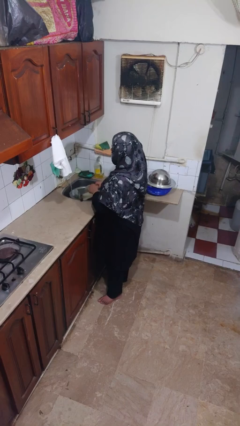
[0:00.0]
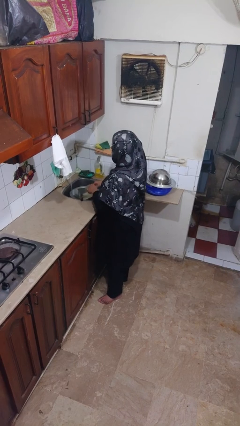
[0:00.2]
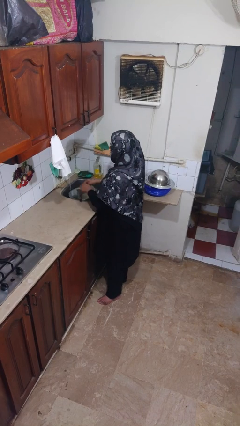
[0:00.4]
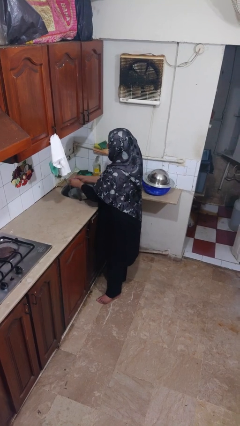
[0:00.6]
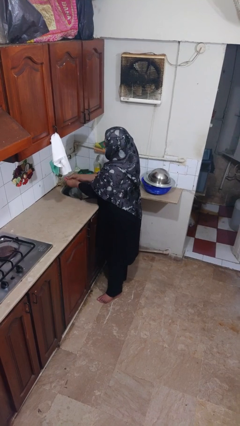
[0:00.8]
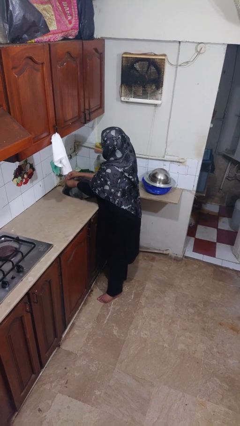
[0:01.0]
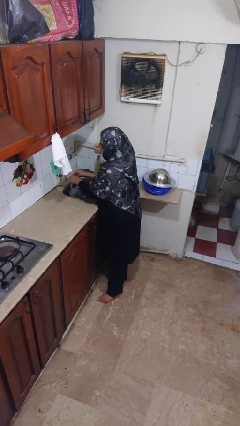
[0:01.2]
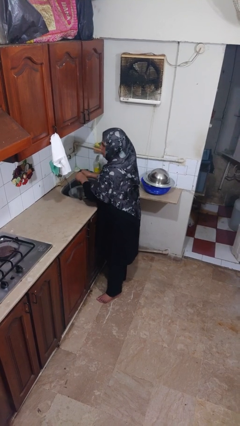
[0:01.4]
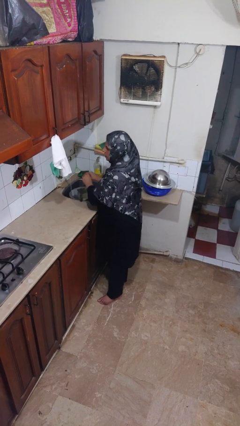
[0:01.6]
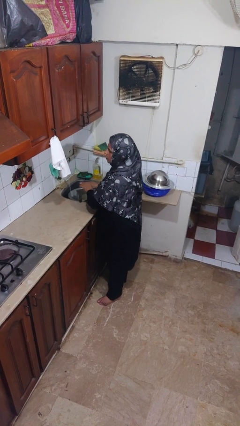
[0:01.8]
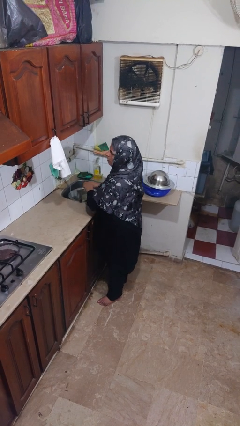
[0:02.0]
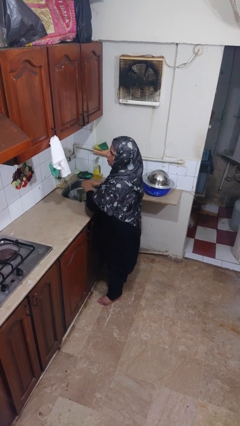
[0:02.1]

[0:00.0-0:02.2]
person washes hands

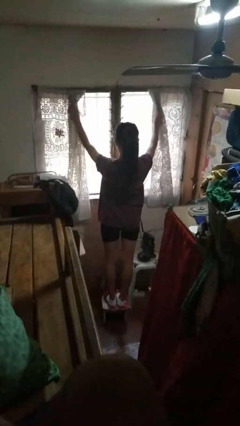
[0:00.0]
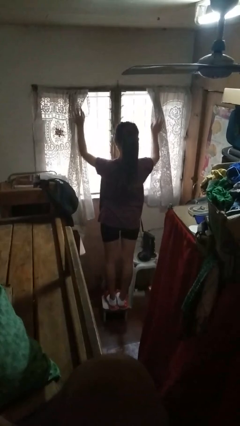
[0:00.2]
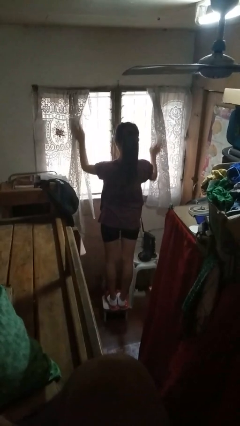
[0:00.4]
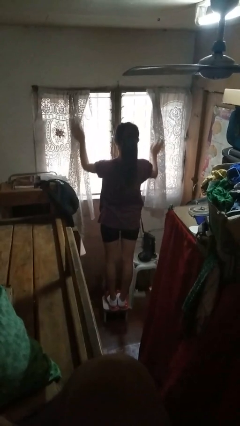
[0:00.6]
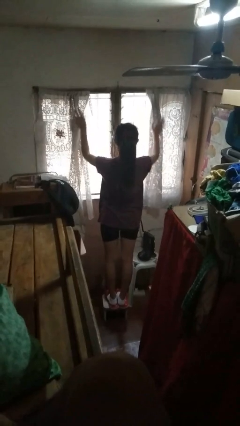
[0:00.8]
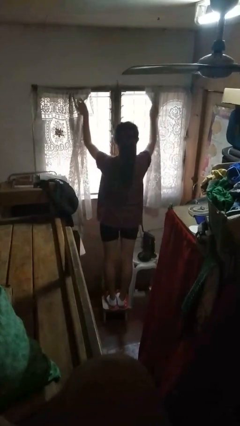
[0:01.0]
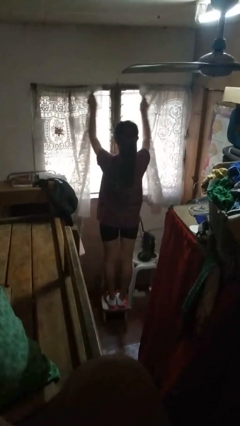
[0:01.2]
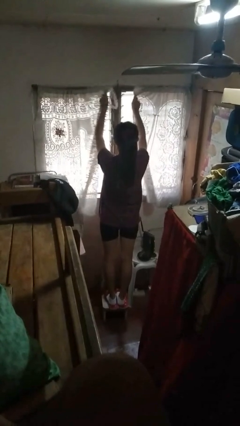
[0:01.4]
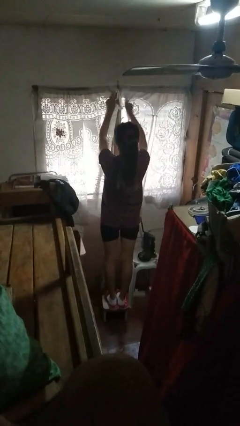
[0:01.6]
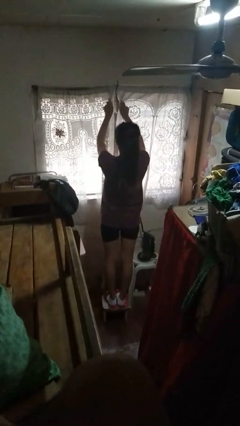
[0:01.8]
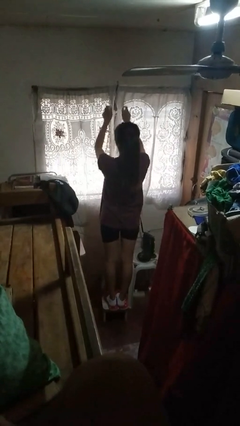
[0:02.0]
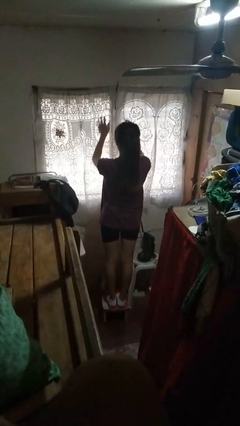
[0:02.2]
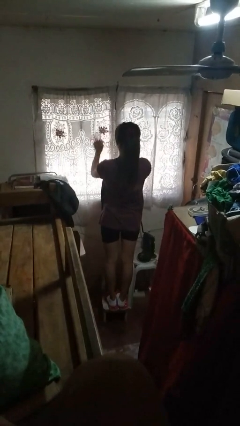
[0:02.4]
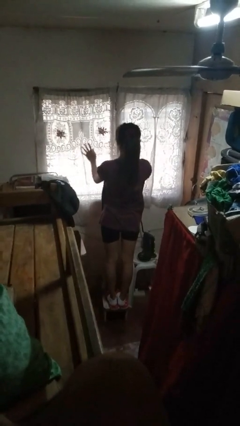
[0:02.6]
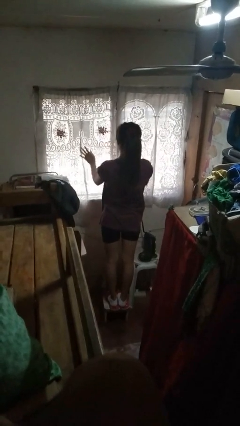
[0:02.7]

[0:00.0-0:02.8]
person closes curtains

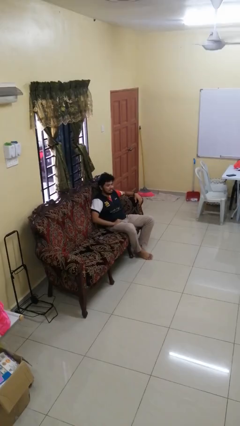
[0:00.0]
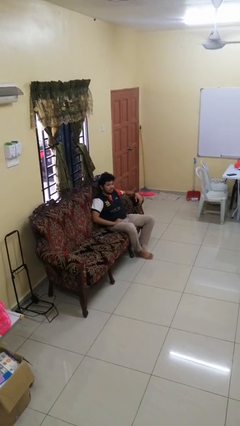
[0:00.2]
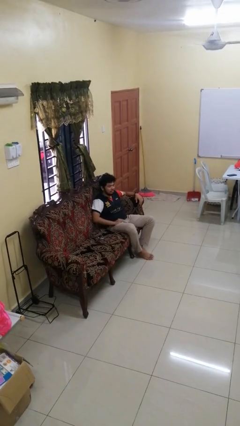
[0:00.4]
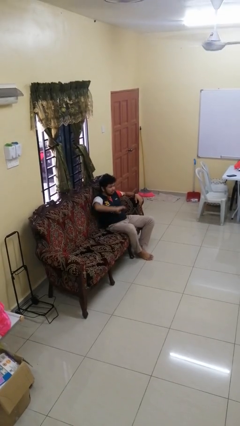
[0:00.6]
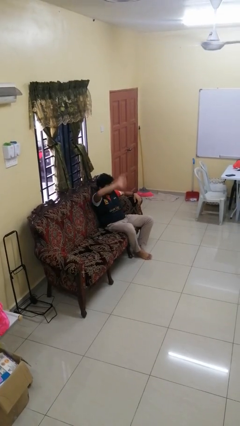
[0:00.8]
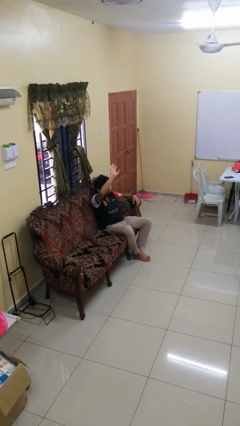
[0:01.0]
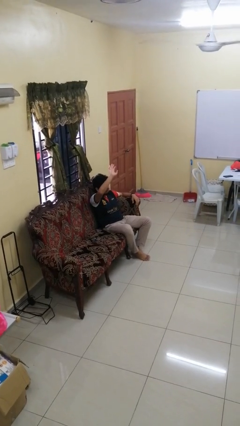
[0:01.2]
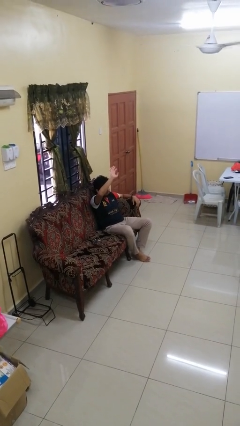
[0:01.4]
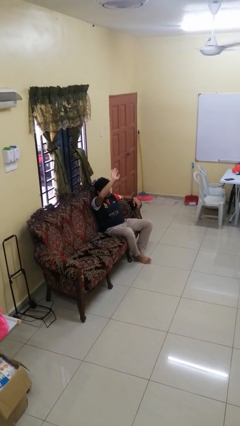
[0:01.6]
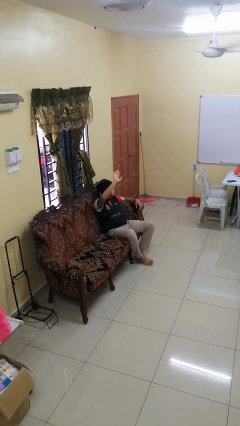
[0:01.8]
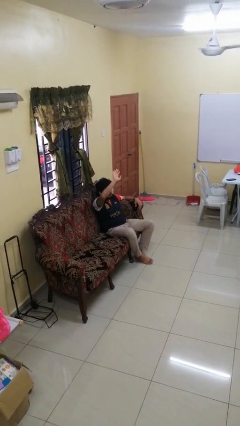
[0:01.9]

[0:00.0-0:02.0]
person gestures swipe up

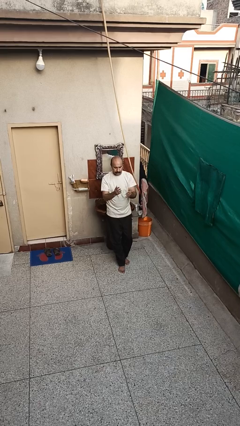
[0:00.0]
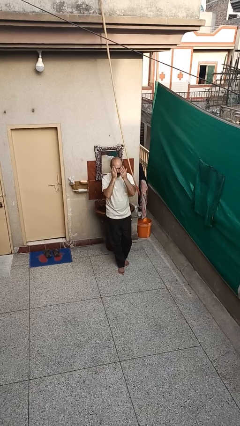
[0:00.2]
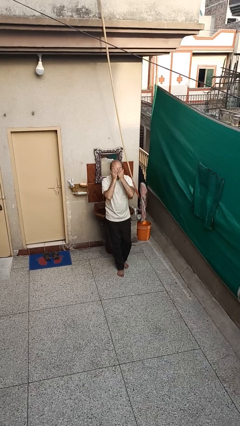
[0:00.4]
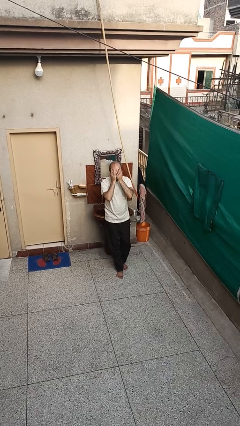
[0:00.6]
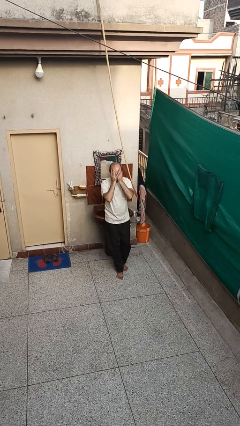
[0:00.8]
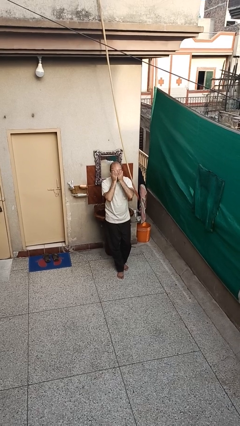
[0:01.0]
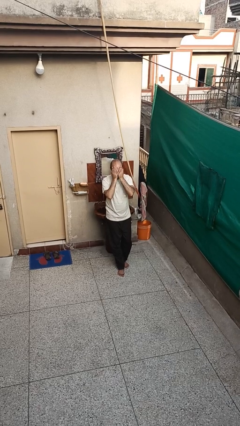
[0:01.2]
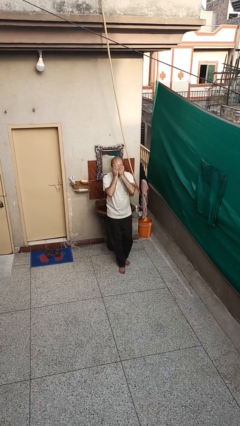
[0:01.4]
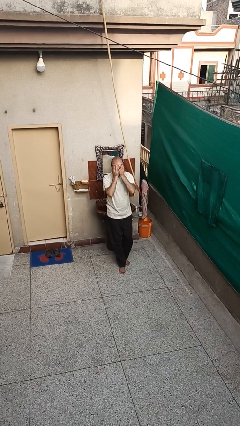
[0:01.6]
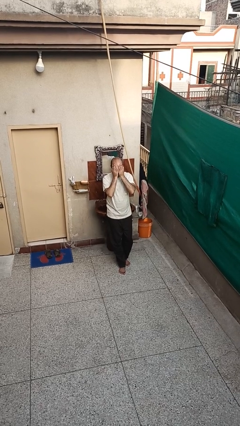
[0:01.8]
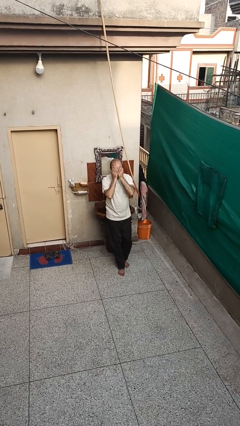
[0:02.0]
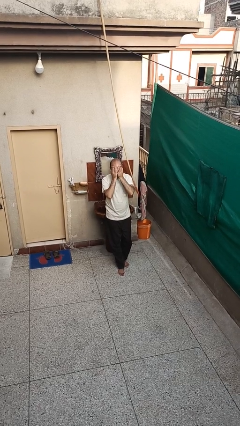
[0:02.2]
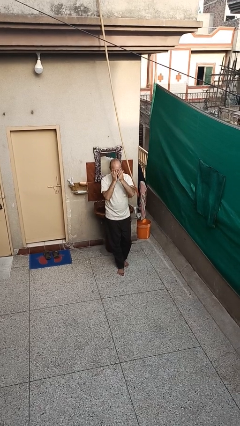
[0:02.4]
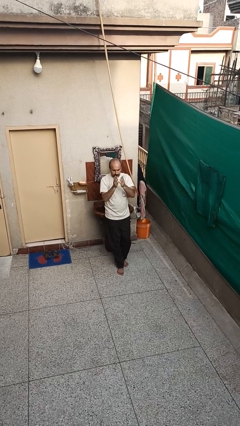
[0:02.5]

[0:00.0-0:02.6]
person covers face with hands

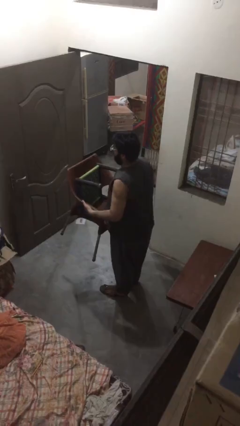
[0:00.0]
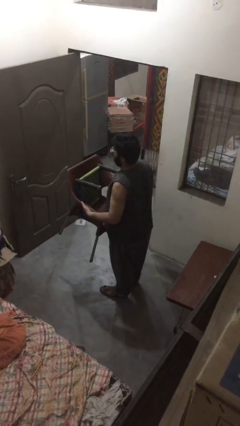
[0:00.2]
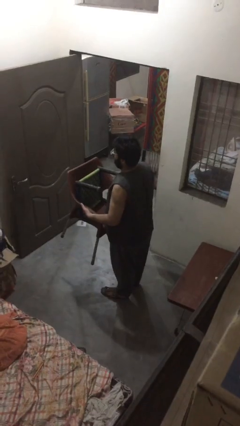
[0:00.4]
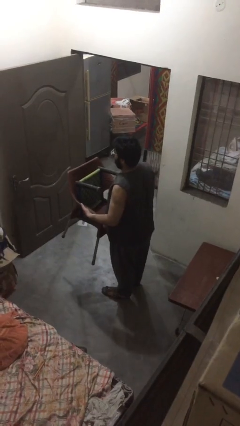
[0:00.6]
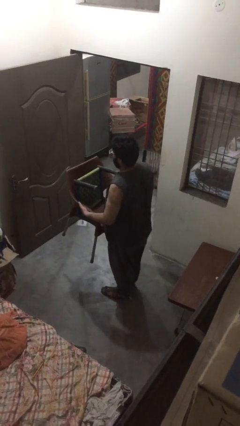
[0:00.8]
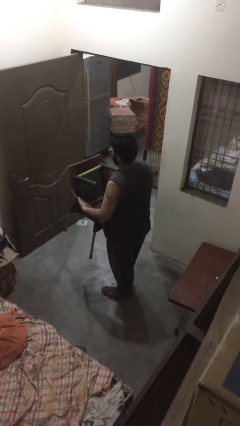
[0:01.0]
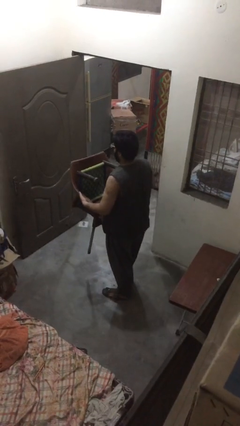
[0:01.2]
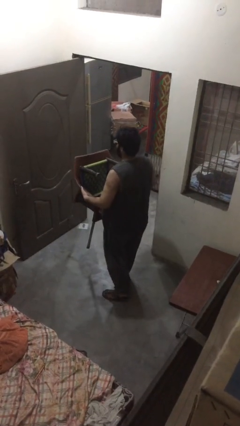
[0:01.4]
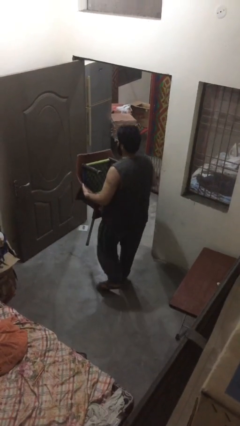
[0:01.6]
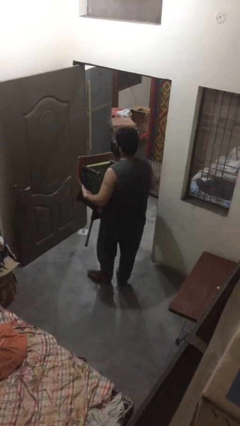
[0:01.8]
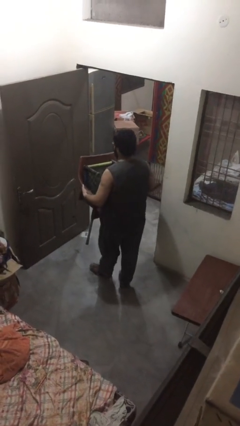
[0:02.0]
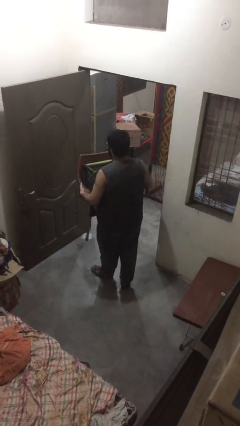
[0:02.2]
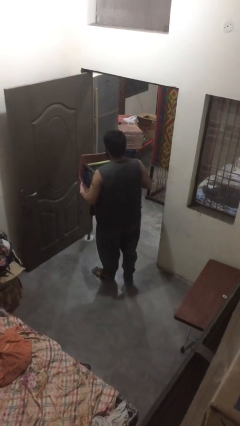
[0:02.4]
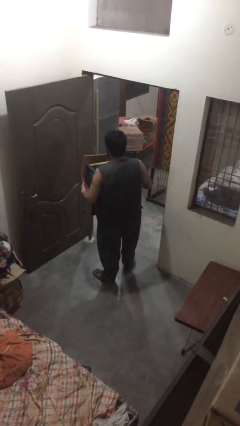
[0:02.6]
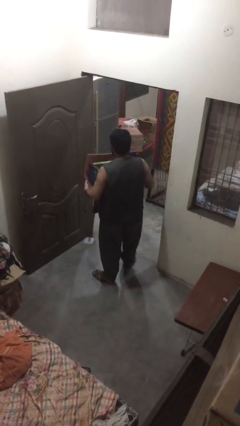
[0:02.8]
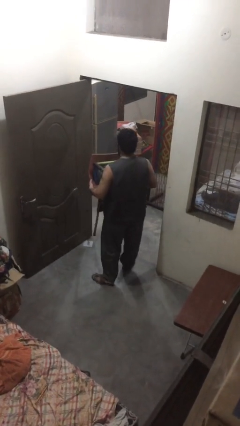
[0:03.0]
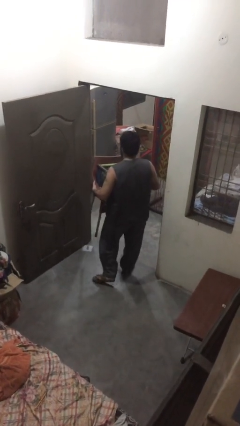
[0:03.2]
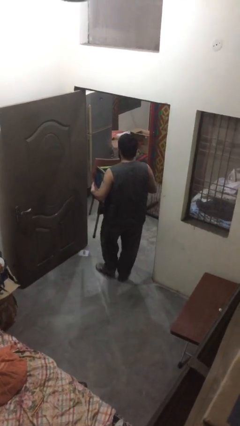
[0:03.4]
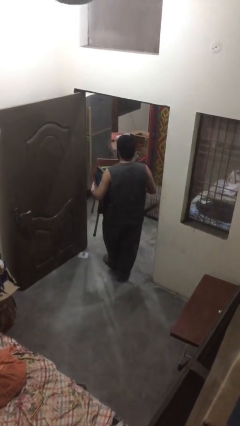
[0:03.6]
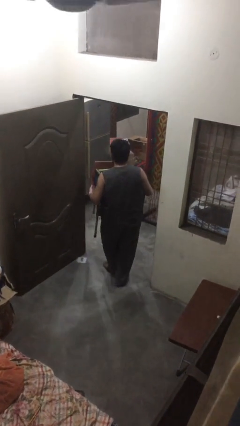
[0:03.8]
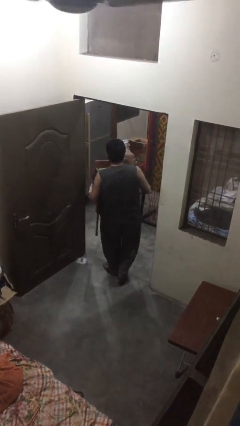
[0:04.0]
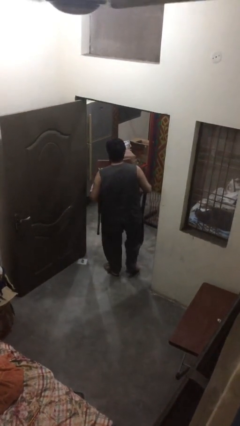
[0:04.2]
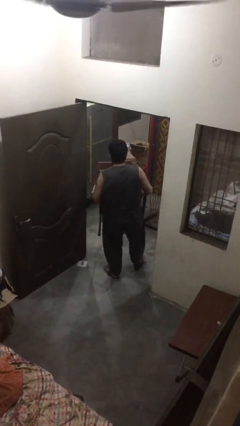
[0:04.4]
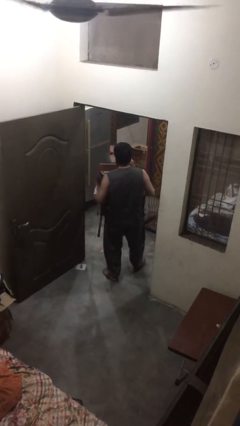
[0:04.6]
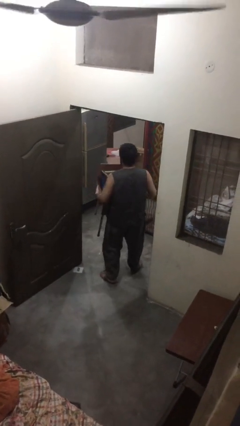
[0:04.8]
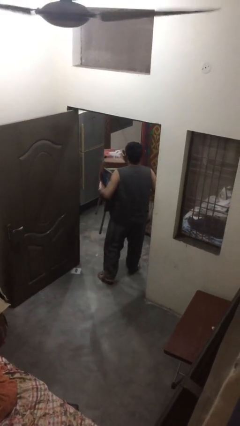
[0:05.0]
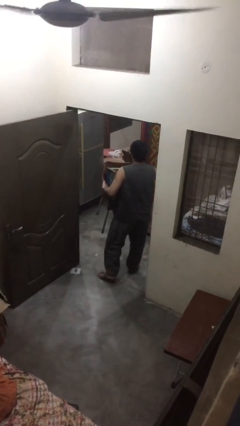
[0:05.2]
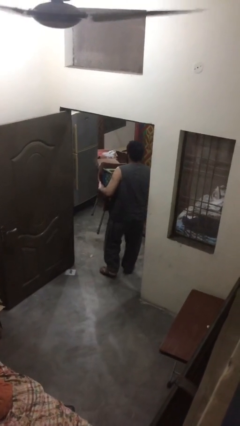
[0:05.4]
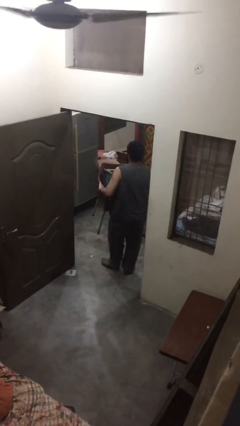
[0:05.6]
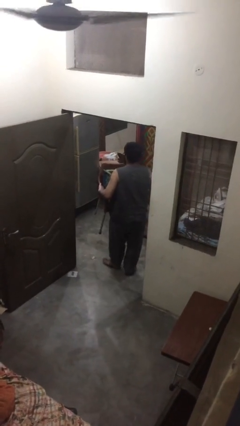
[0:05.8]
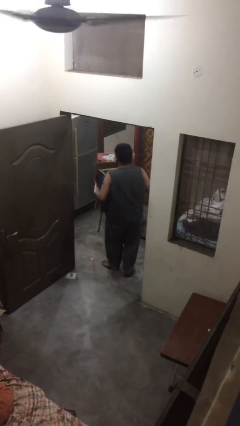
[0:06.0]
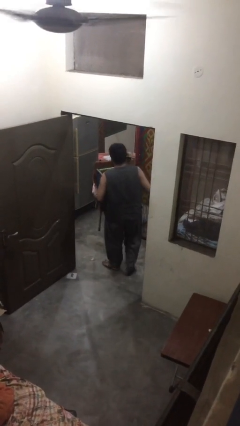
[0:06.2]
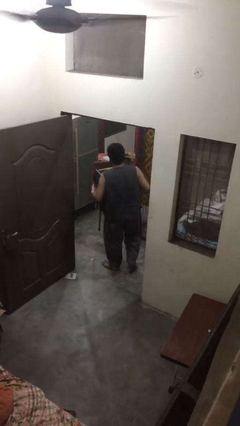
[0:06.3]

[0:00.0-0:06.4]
person carries heavy object

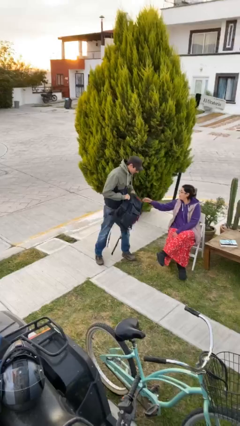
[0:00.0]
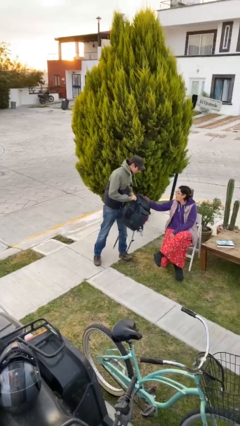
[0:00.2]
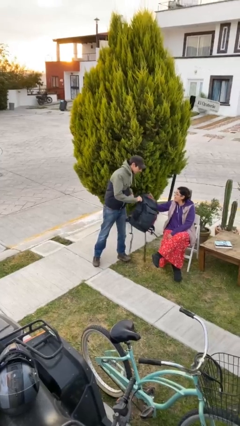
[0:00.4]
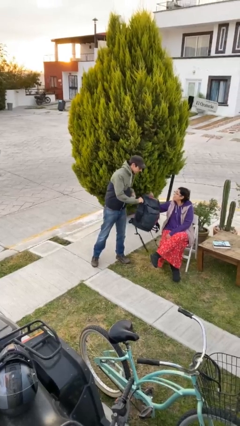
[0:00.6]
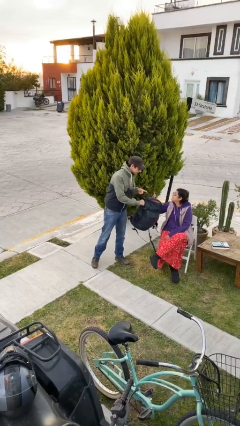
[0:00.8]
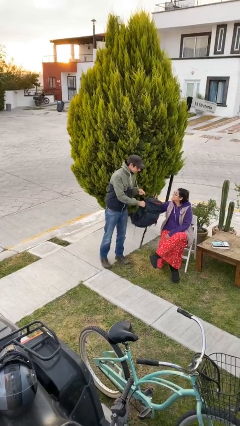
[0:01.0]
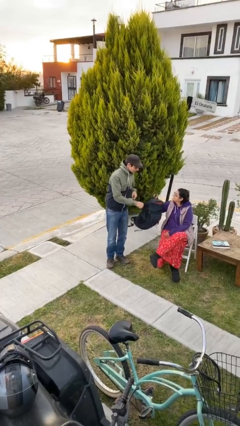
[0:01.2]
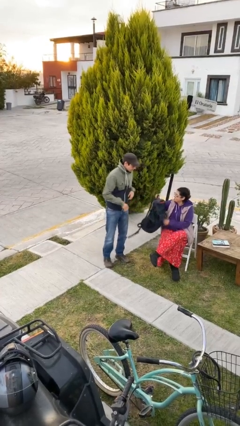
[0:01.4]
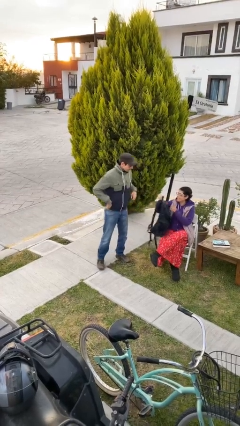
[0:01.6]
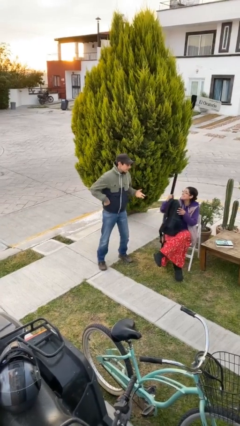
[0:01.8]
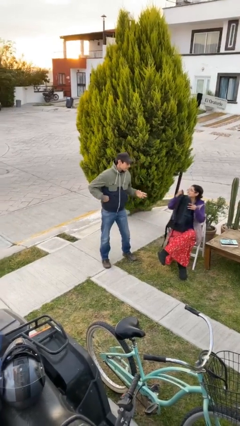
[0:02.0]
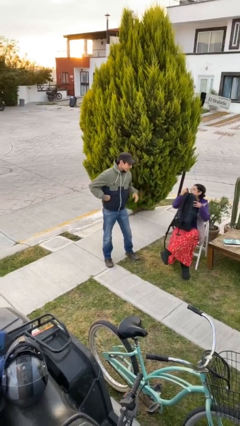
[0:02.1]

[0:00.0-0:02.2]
person transfers object to person
